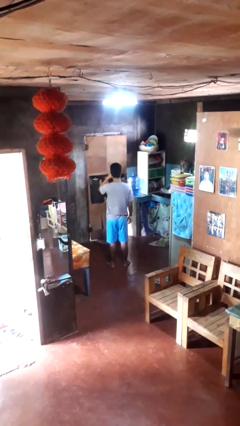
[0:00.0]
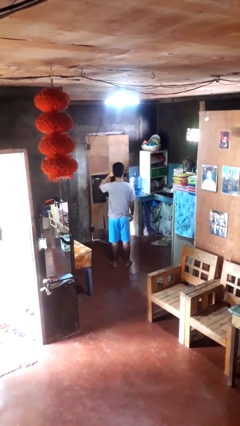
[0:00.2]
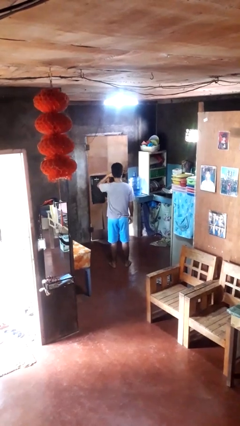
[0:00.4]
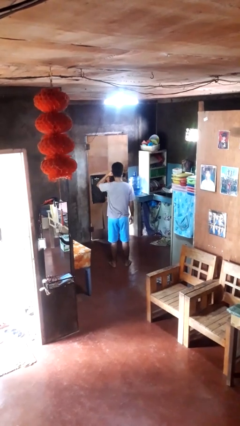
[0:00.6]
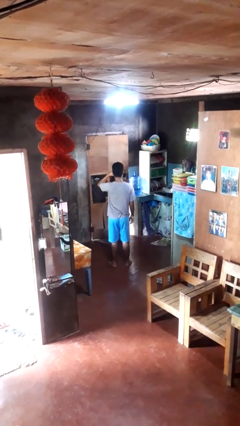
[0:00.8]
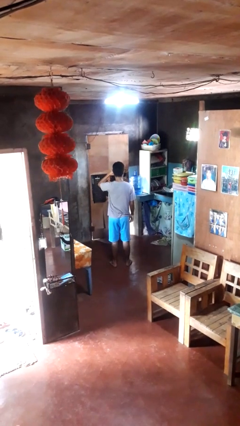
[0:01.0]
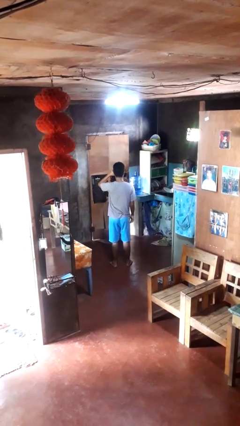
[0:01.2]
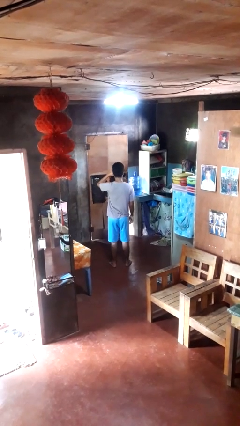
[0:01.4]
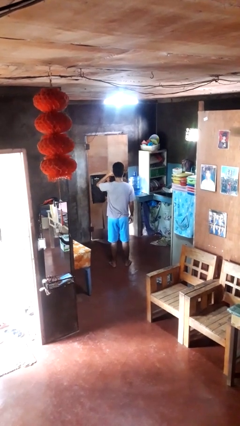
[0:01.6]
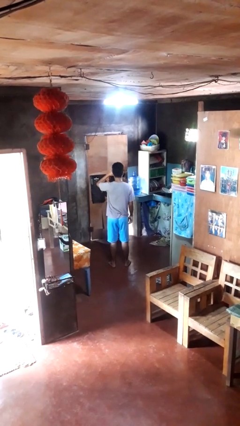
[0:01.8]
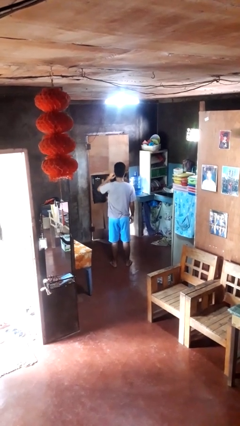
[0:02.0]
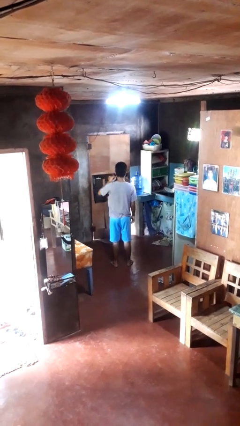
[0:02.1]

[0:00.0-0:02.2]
person rubs eyes

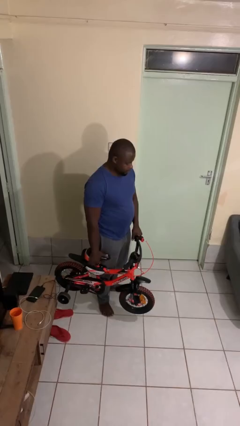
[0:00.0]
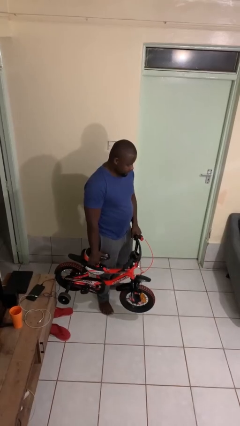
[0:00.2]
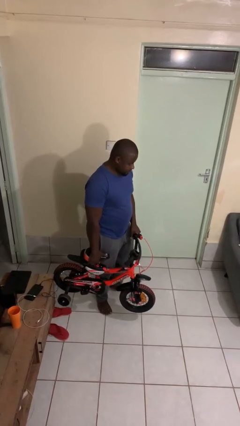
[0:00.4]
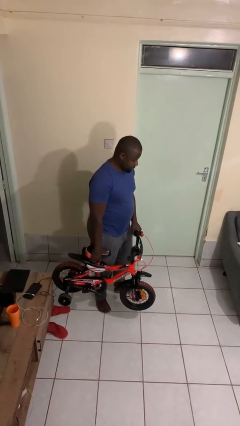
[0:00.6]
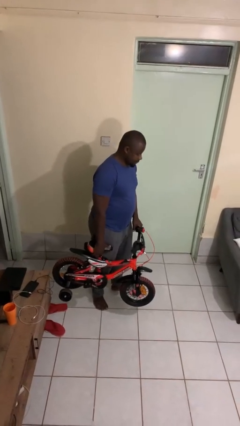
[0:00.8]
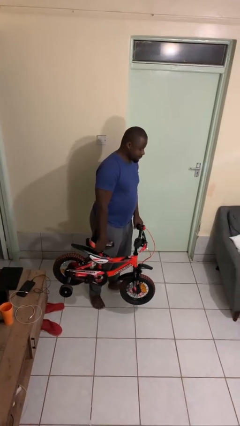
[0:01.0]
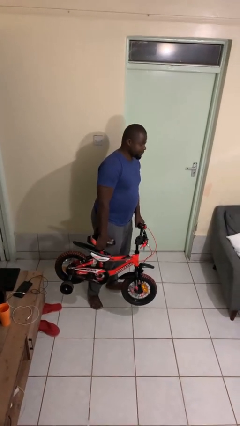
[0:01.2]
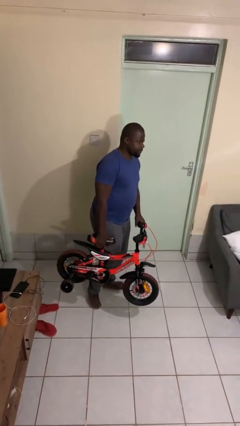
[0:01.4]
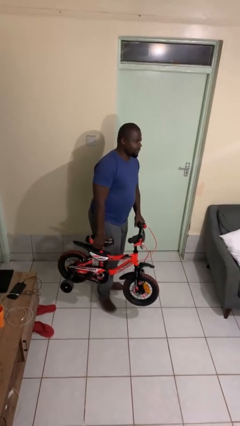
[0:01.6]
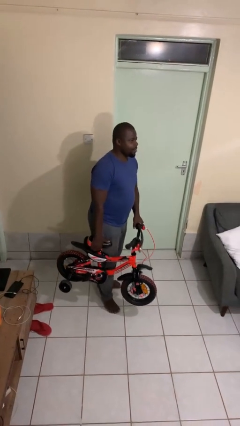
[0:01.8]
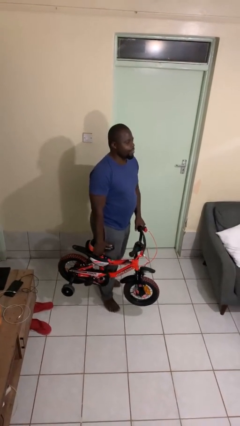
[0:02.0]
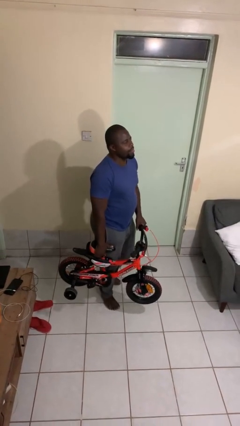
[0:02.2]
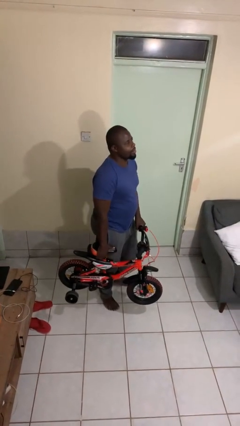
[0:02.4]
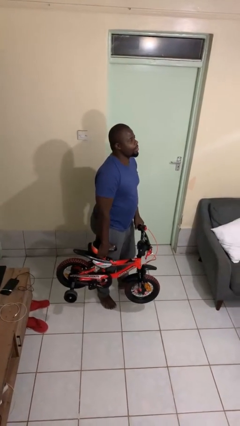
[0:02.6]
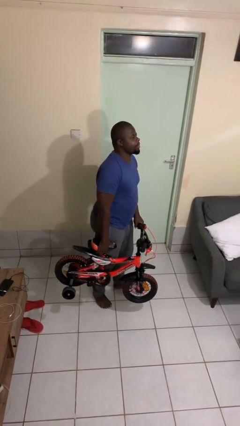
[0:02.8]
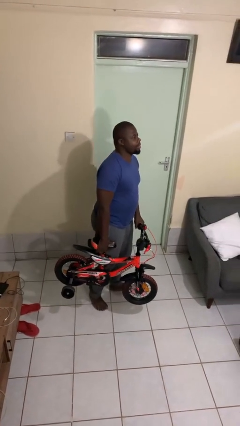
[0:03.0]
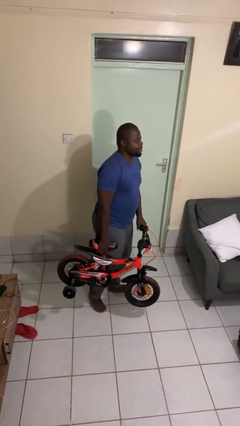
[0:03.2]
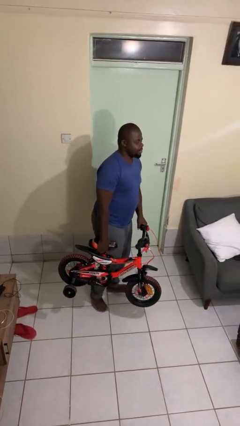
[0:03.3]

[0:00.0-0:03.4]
person carries bicycle

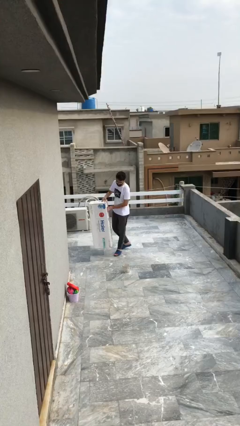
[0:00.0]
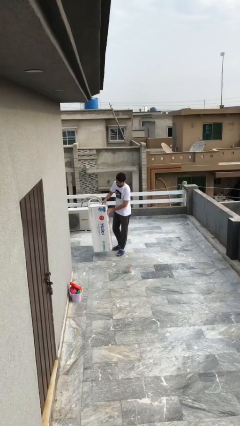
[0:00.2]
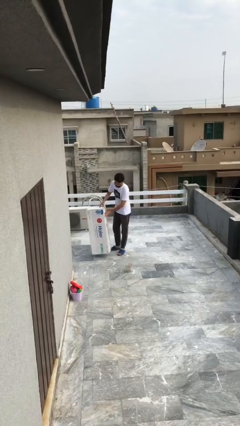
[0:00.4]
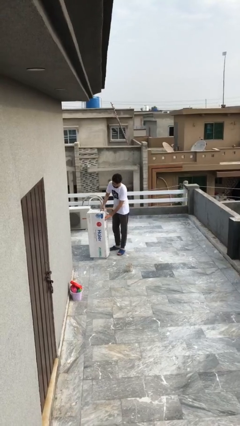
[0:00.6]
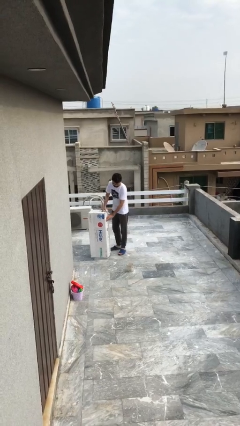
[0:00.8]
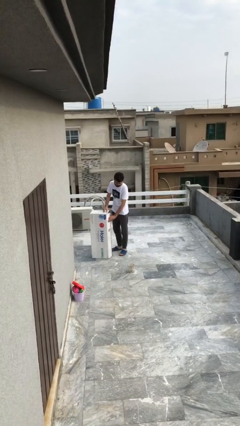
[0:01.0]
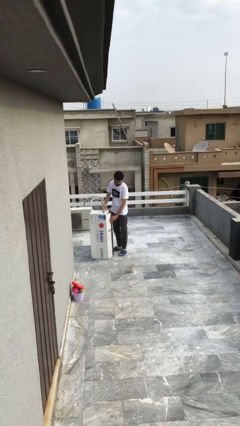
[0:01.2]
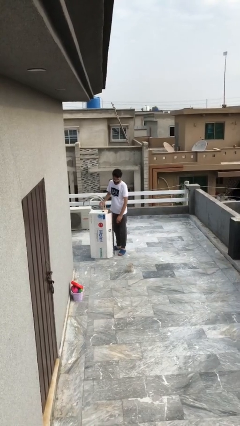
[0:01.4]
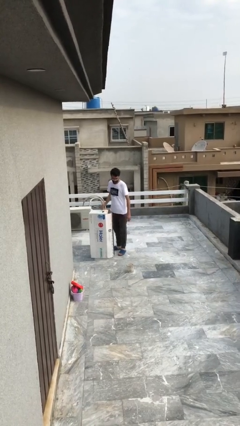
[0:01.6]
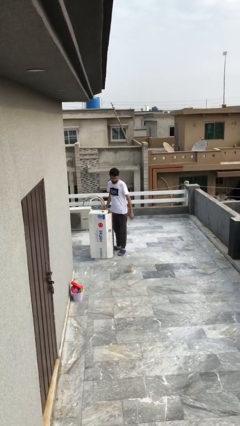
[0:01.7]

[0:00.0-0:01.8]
person puts down object on floor

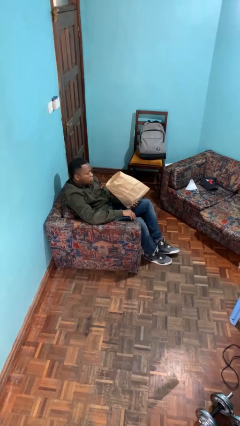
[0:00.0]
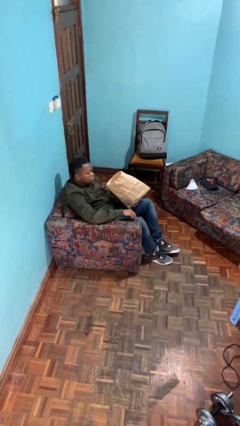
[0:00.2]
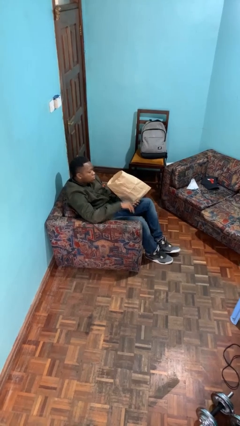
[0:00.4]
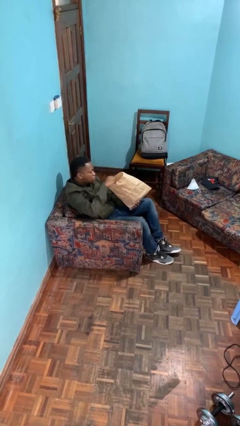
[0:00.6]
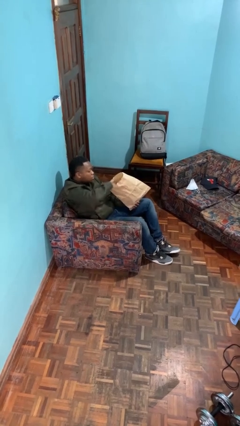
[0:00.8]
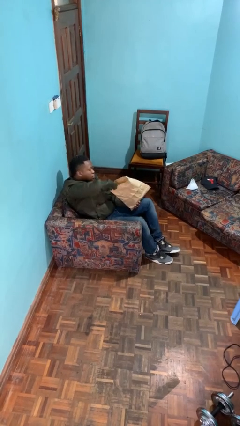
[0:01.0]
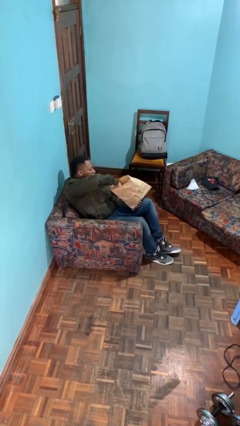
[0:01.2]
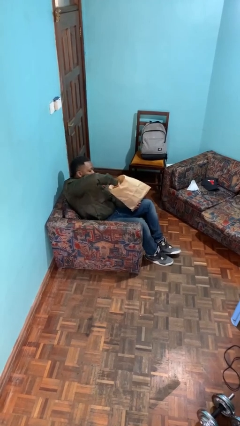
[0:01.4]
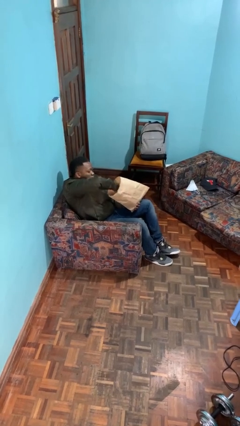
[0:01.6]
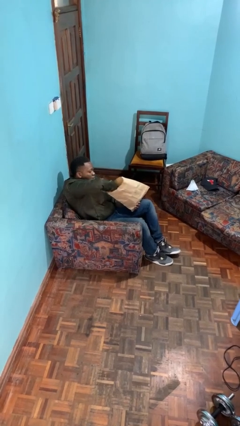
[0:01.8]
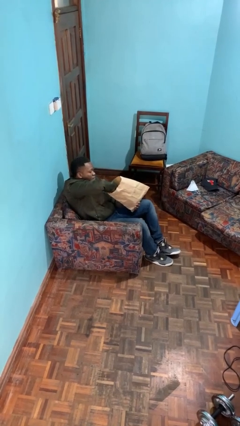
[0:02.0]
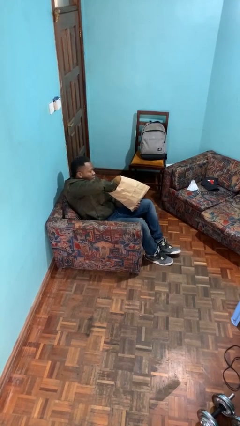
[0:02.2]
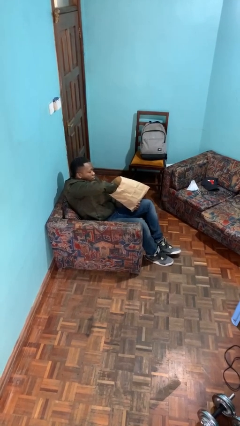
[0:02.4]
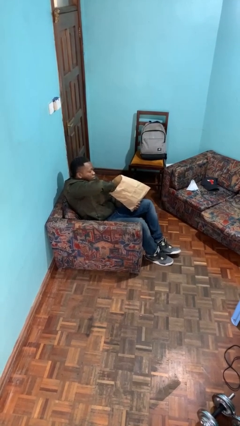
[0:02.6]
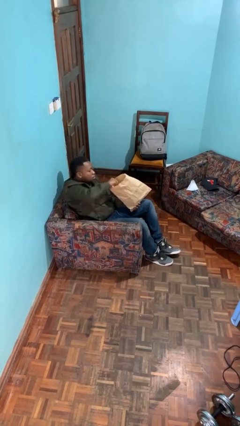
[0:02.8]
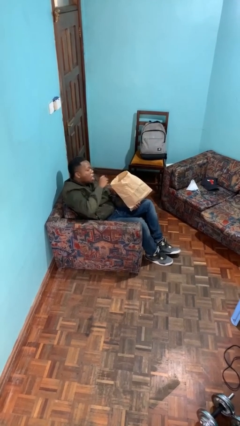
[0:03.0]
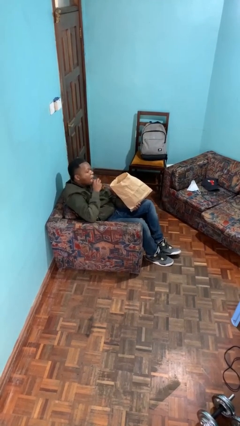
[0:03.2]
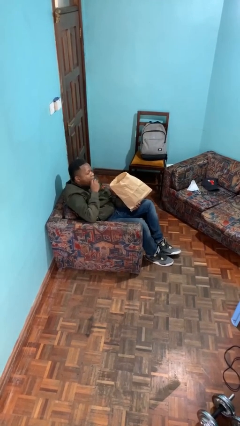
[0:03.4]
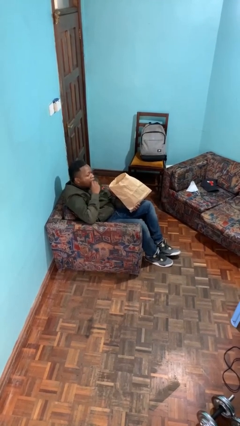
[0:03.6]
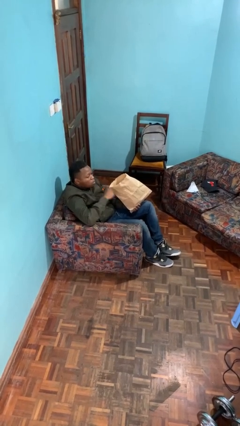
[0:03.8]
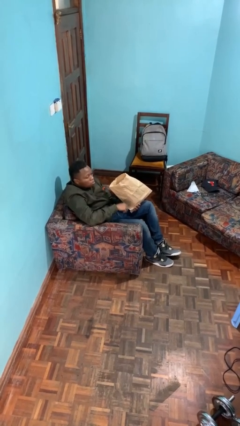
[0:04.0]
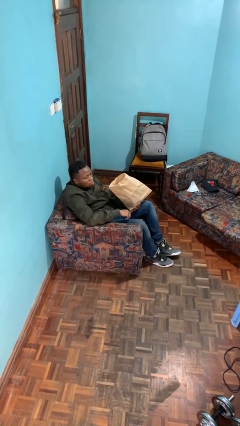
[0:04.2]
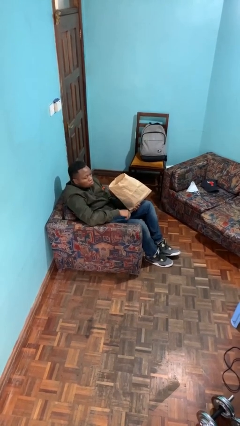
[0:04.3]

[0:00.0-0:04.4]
person eats snack from bag

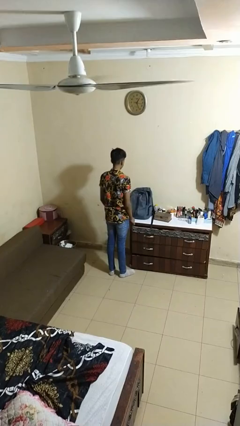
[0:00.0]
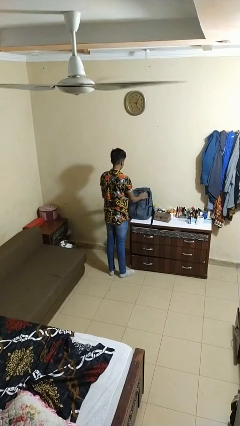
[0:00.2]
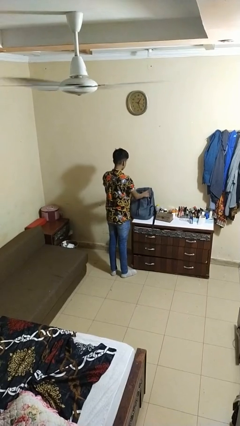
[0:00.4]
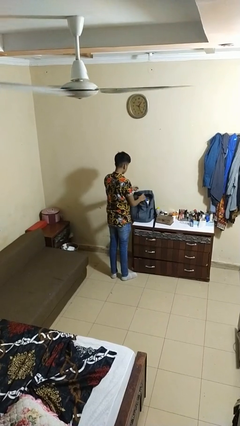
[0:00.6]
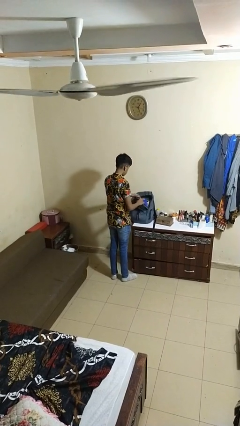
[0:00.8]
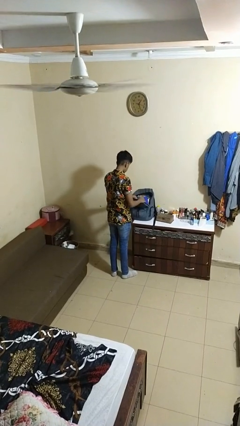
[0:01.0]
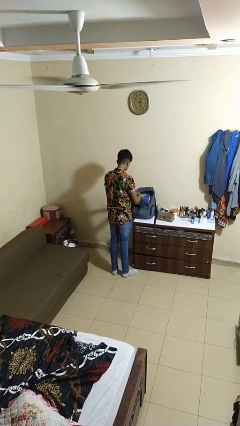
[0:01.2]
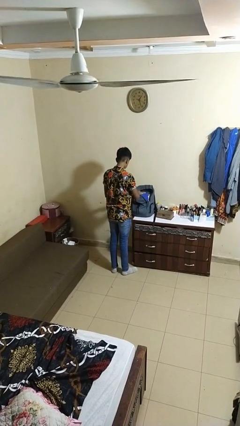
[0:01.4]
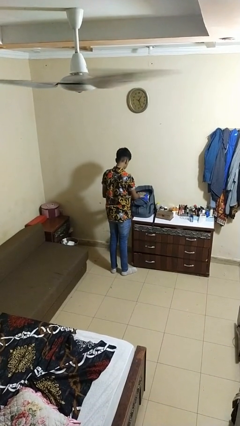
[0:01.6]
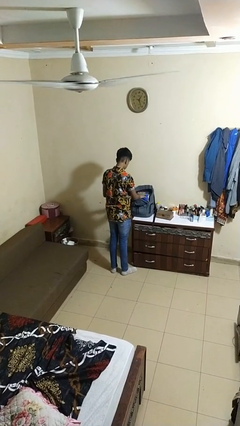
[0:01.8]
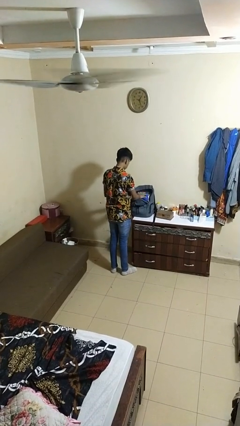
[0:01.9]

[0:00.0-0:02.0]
person searches in backpack

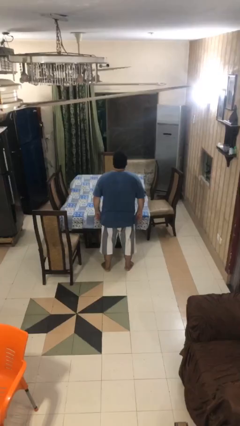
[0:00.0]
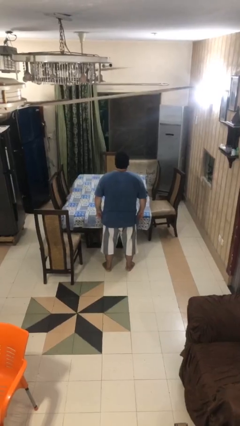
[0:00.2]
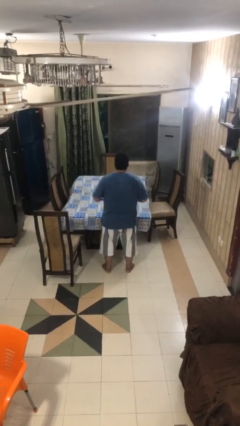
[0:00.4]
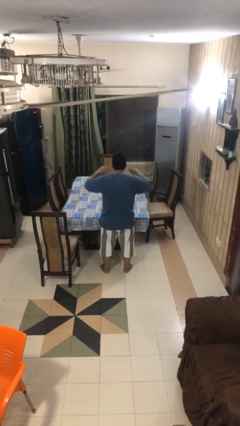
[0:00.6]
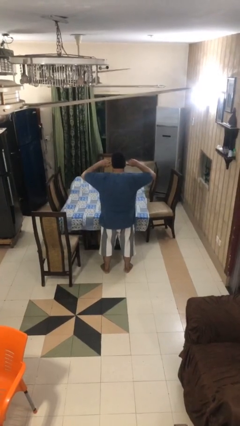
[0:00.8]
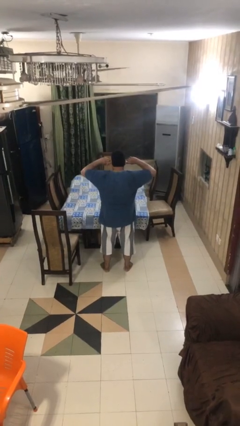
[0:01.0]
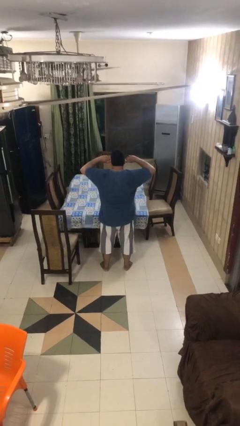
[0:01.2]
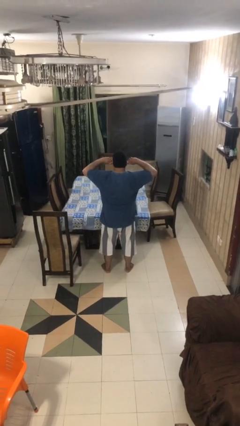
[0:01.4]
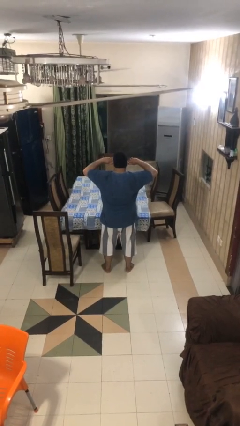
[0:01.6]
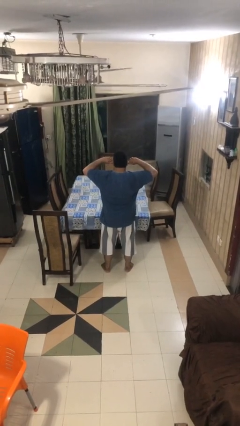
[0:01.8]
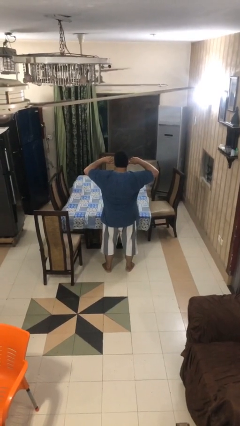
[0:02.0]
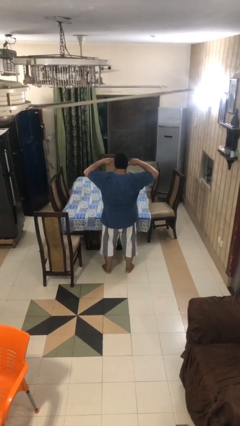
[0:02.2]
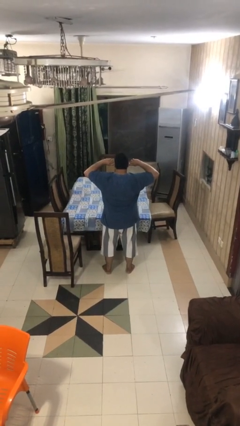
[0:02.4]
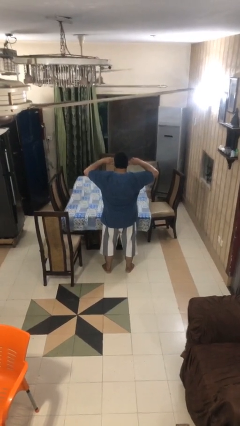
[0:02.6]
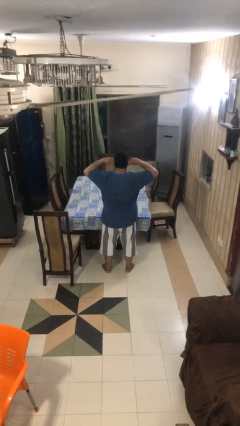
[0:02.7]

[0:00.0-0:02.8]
person puts fingers in ear
